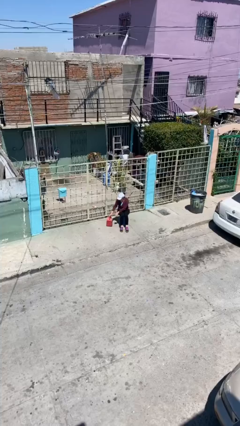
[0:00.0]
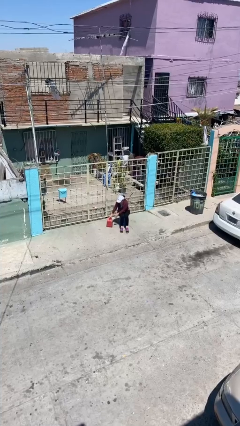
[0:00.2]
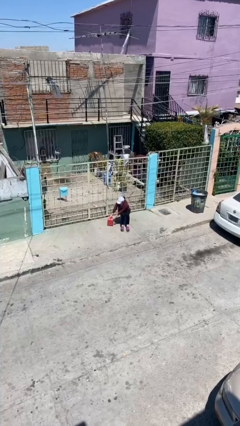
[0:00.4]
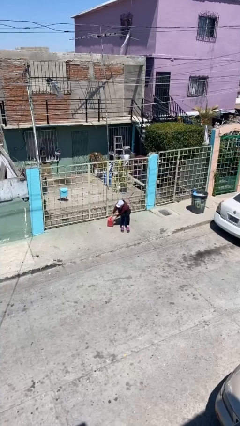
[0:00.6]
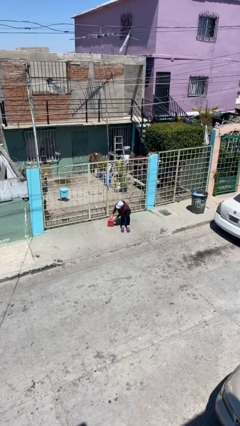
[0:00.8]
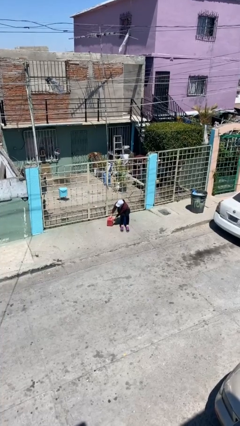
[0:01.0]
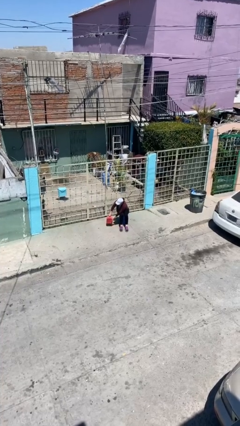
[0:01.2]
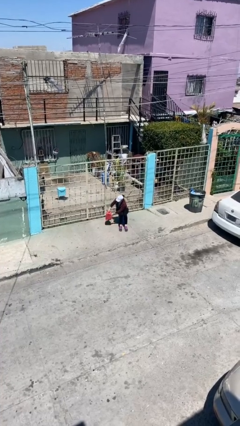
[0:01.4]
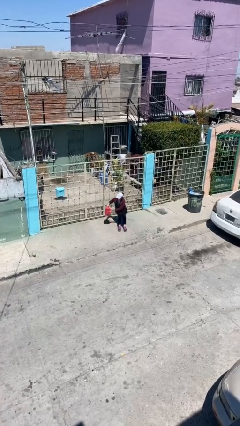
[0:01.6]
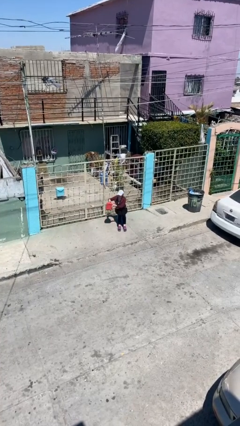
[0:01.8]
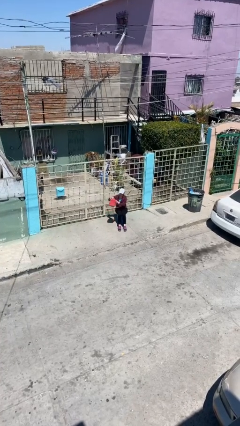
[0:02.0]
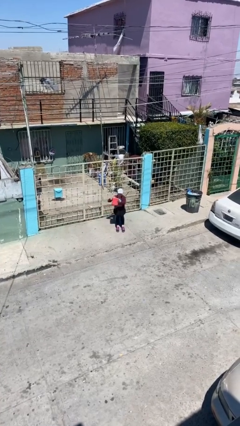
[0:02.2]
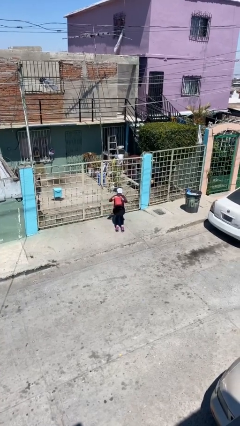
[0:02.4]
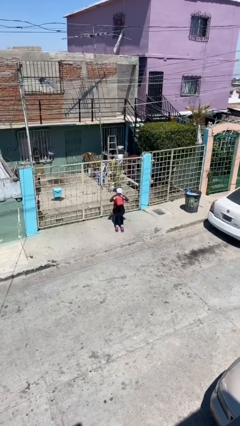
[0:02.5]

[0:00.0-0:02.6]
person picks up object from floor

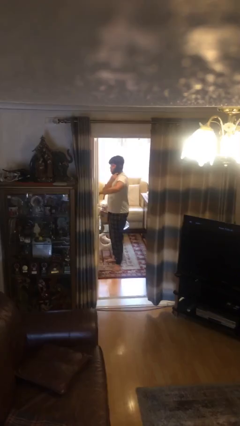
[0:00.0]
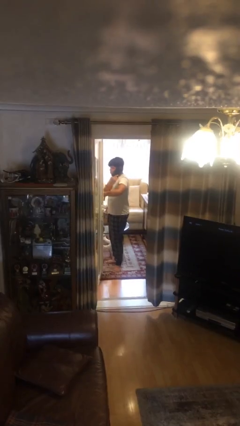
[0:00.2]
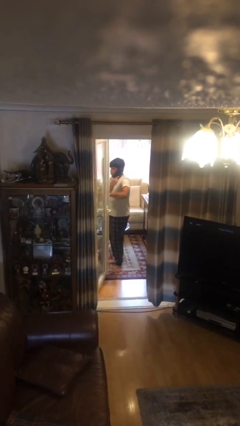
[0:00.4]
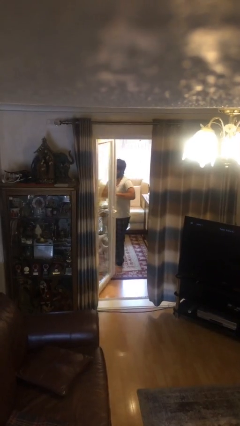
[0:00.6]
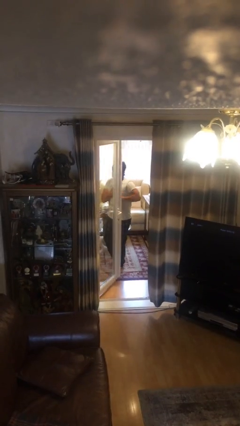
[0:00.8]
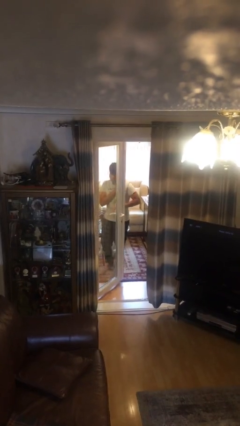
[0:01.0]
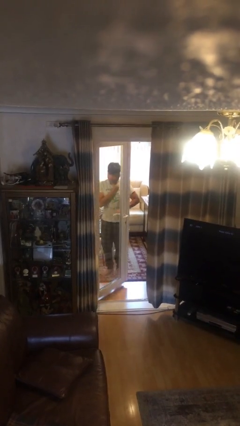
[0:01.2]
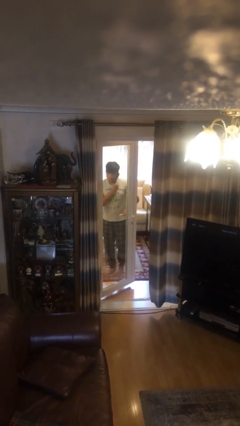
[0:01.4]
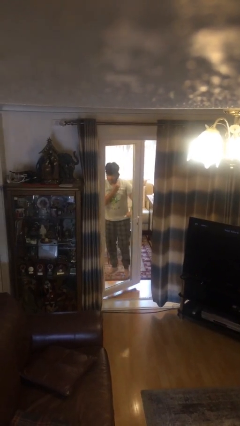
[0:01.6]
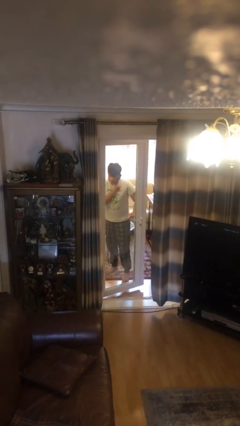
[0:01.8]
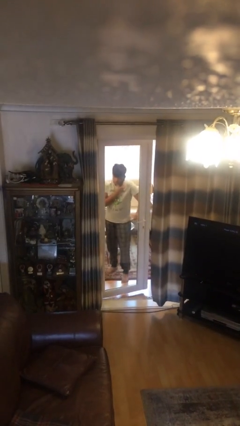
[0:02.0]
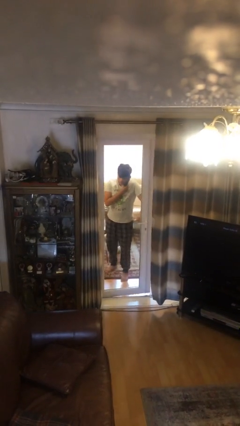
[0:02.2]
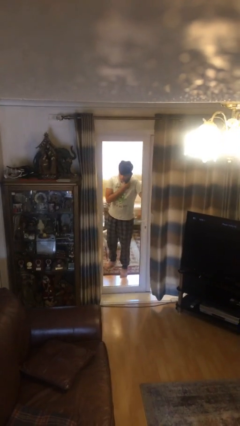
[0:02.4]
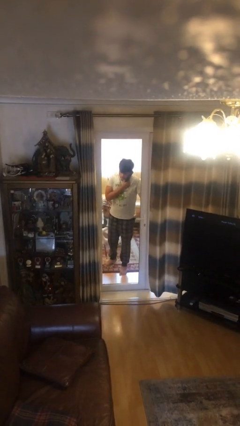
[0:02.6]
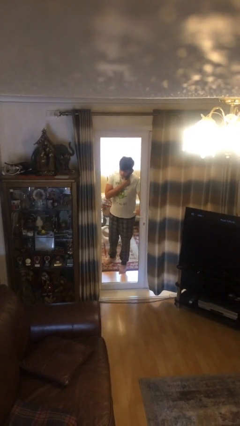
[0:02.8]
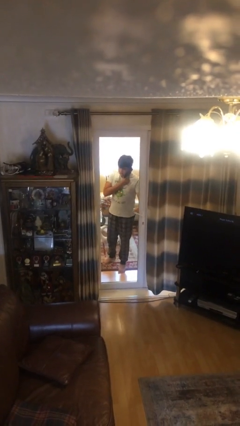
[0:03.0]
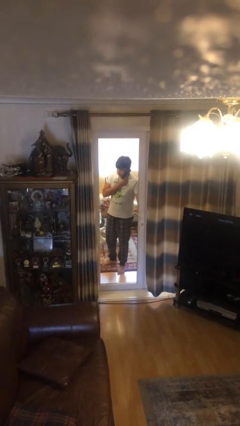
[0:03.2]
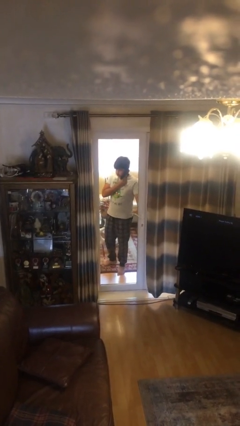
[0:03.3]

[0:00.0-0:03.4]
person closes facility door

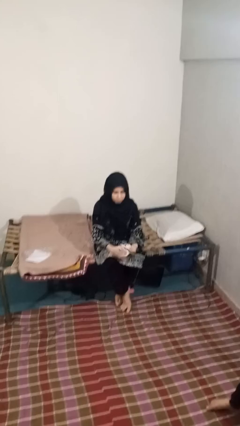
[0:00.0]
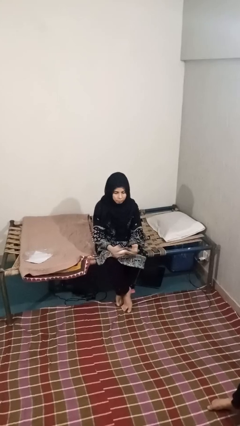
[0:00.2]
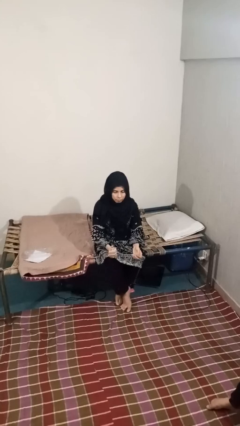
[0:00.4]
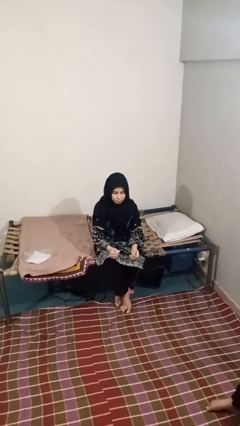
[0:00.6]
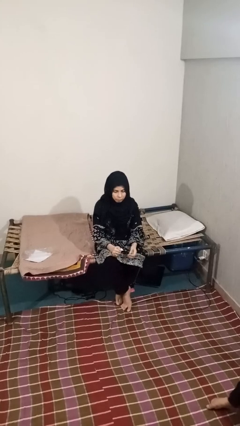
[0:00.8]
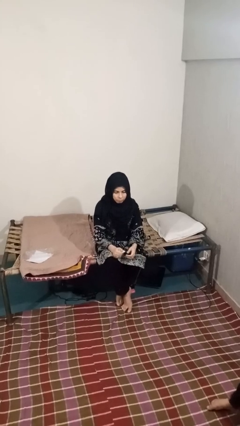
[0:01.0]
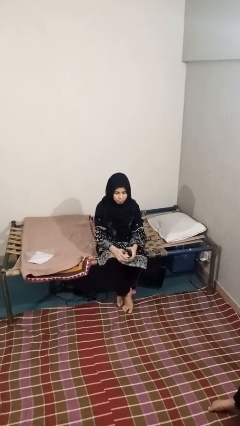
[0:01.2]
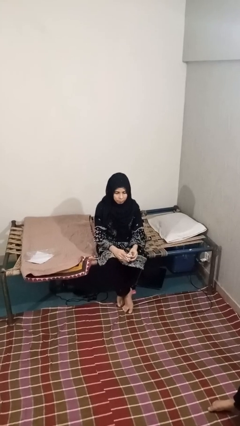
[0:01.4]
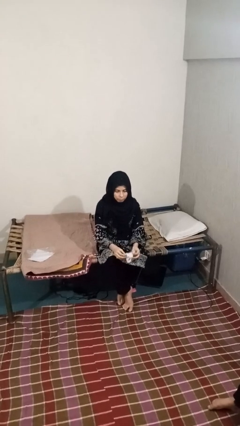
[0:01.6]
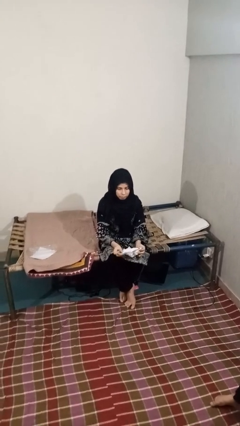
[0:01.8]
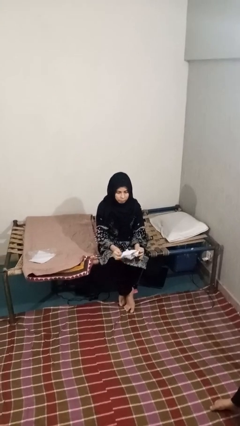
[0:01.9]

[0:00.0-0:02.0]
person crumples paper

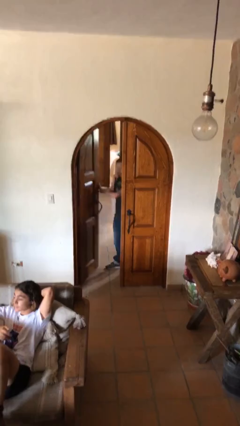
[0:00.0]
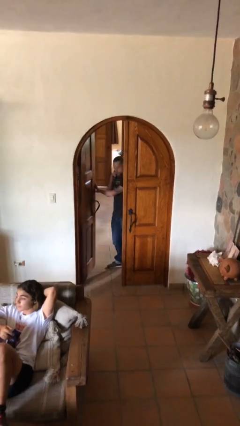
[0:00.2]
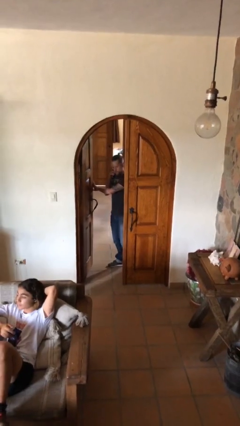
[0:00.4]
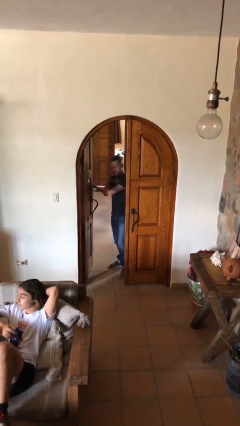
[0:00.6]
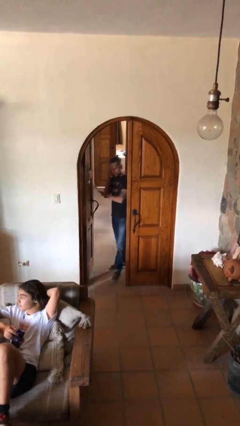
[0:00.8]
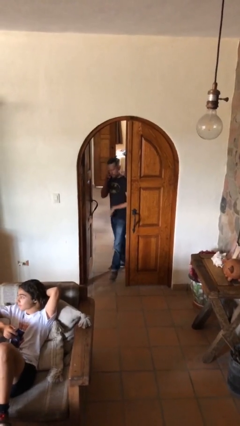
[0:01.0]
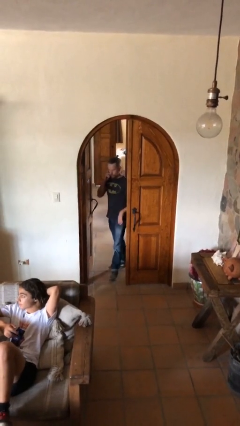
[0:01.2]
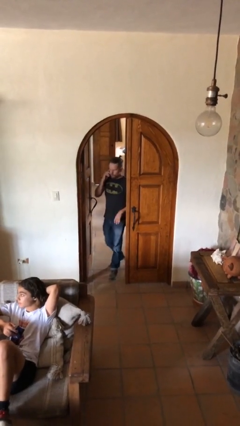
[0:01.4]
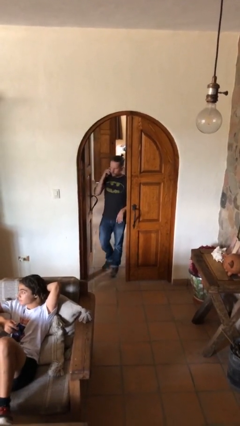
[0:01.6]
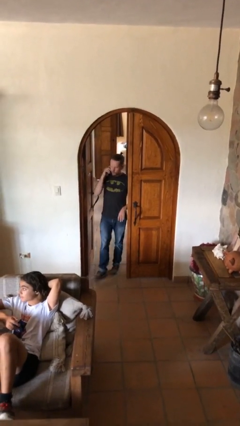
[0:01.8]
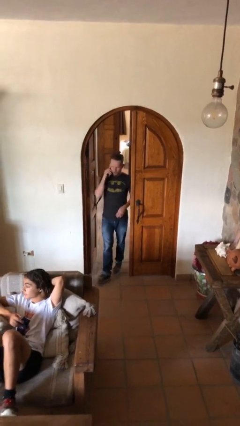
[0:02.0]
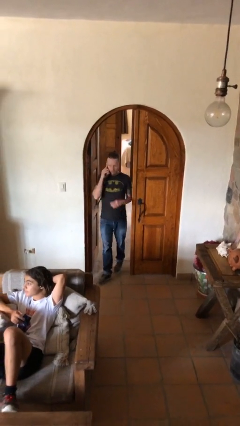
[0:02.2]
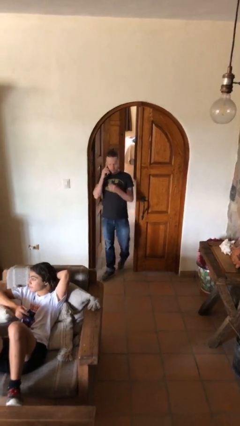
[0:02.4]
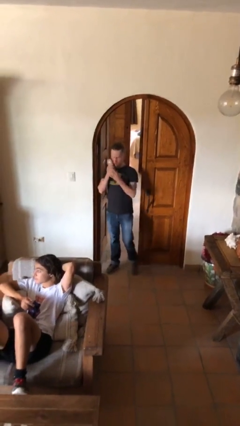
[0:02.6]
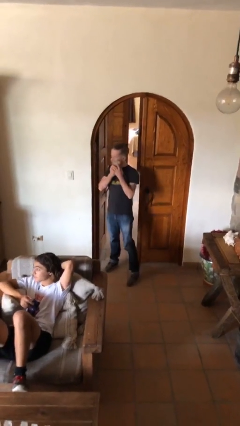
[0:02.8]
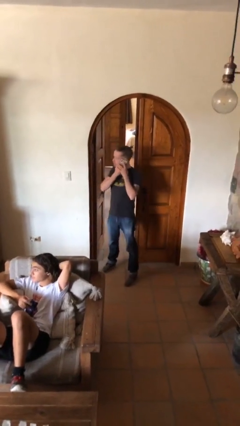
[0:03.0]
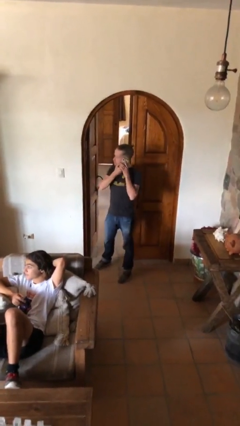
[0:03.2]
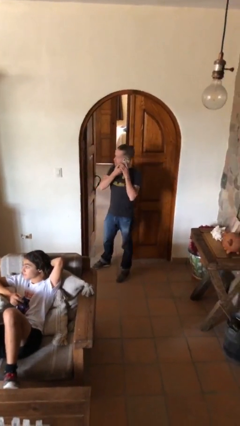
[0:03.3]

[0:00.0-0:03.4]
person enters scene through structure

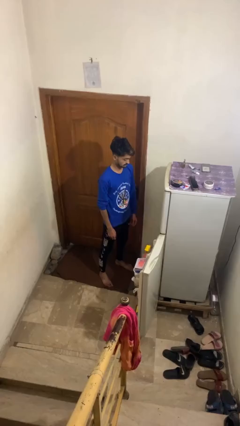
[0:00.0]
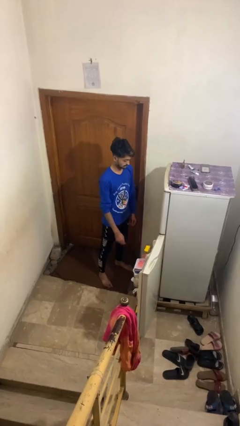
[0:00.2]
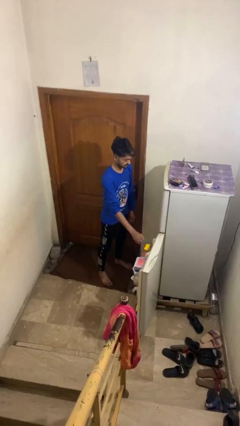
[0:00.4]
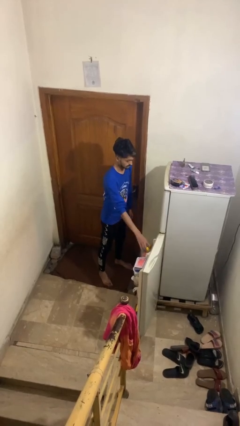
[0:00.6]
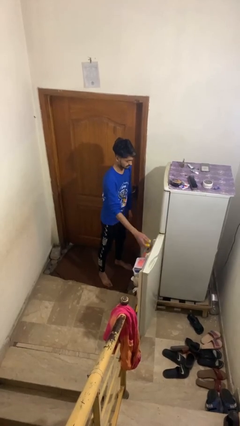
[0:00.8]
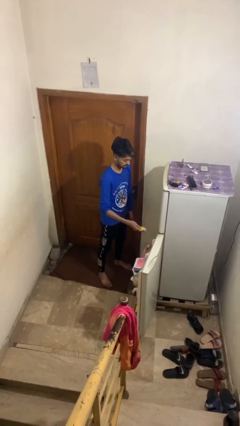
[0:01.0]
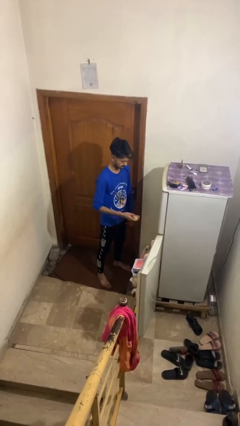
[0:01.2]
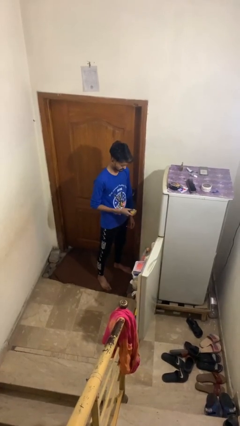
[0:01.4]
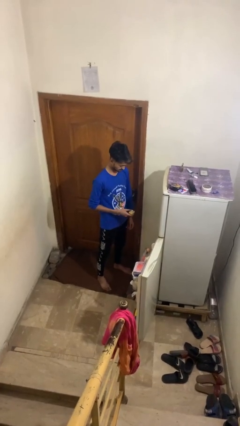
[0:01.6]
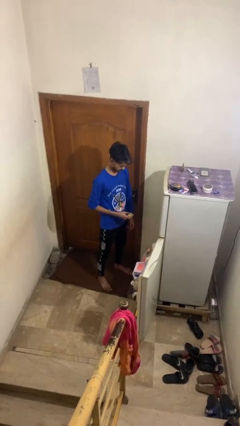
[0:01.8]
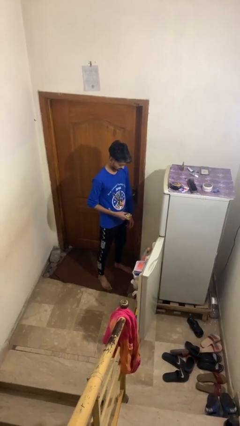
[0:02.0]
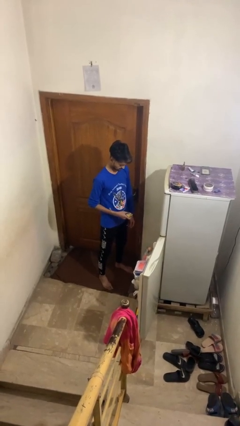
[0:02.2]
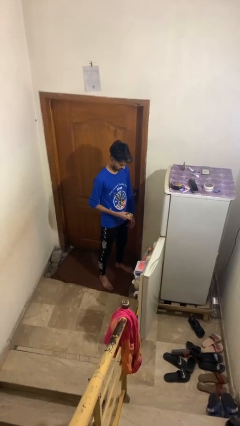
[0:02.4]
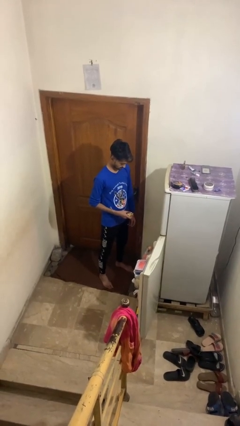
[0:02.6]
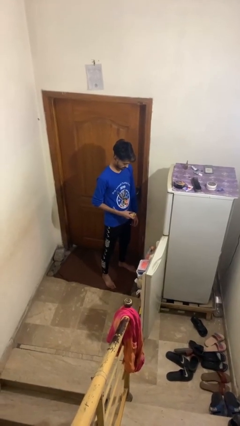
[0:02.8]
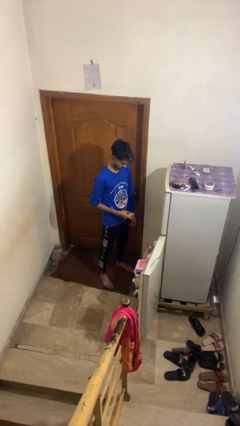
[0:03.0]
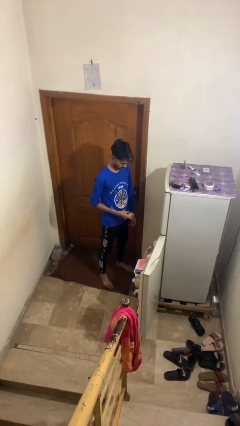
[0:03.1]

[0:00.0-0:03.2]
person takes object from refrigerator

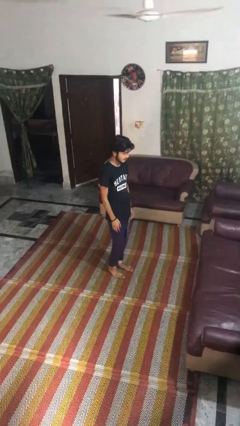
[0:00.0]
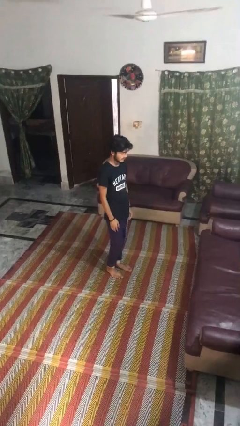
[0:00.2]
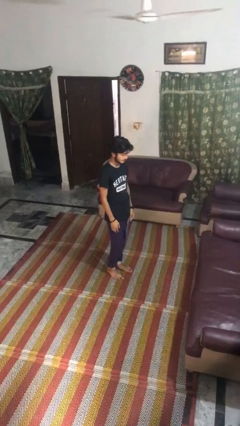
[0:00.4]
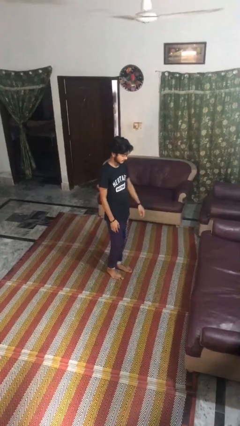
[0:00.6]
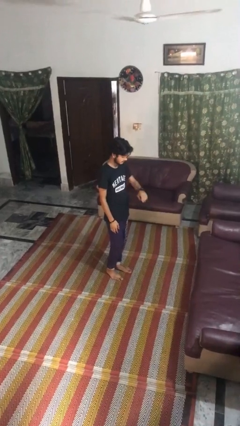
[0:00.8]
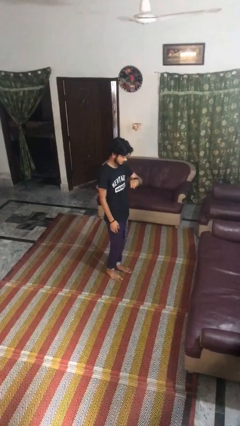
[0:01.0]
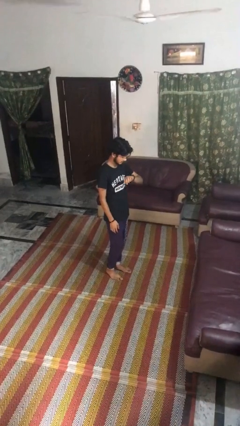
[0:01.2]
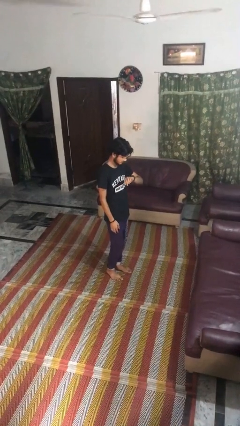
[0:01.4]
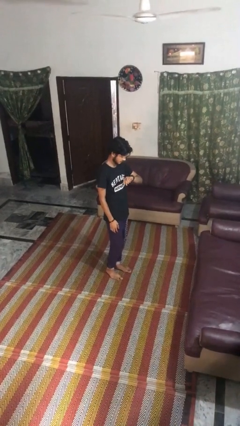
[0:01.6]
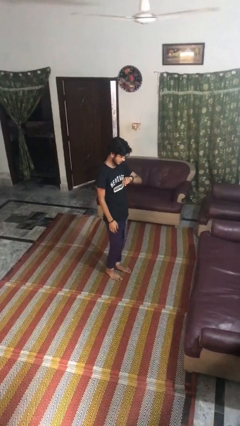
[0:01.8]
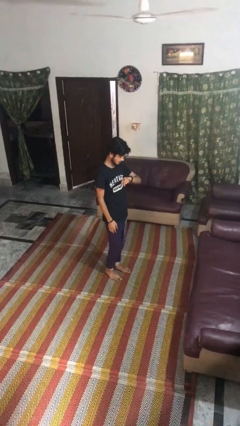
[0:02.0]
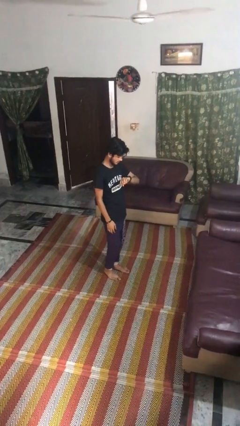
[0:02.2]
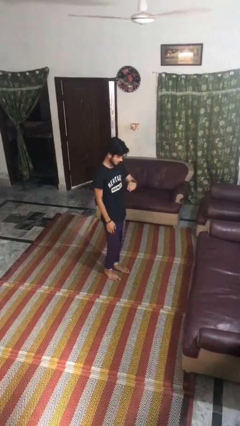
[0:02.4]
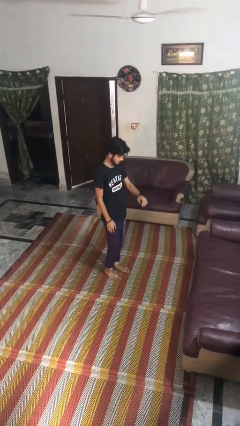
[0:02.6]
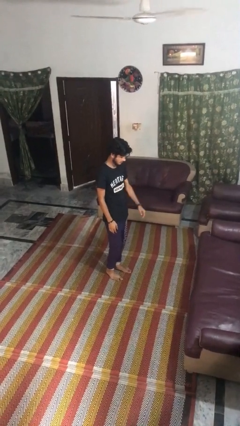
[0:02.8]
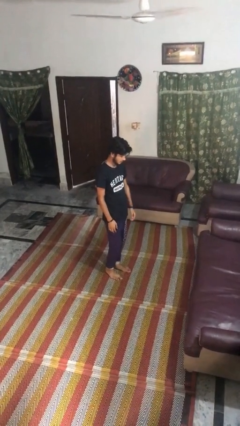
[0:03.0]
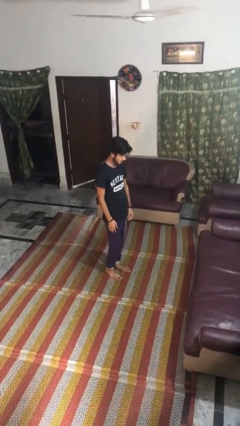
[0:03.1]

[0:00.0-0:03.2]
person looks at wristwatch
